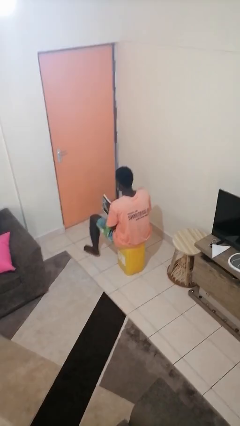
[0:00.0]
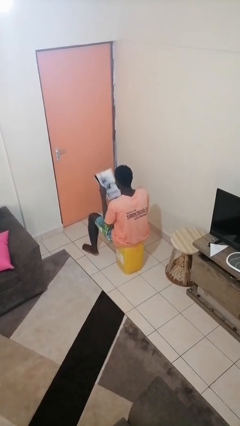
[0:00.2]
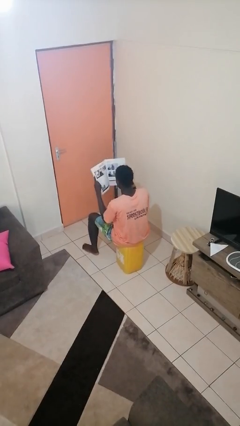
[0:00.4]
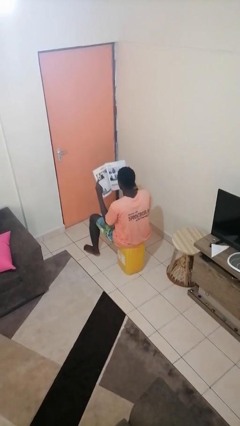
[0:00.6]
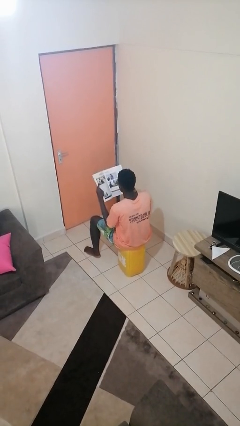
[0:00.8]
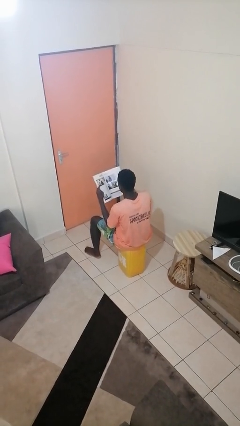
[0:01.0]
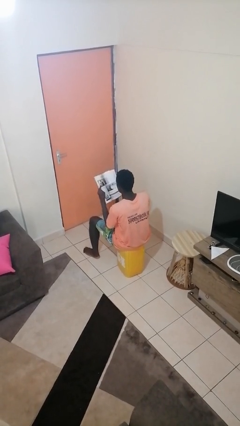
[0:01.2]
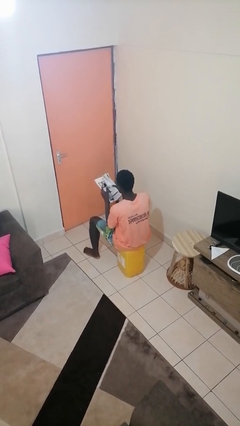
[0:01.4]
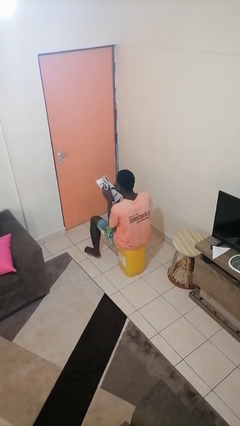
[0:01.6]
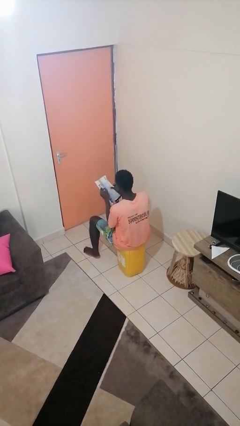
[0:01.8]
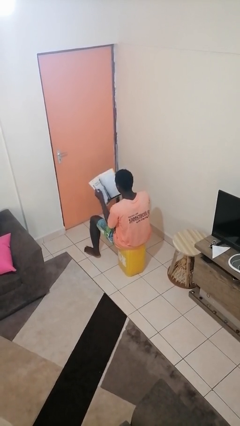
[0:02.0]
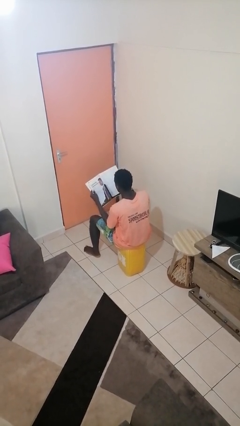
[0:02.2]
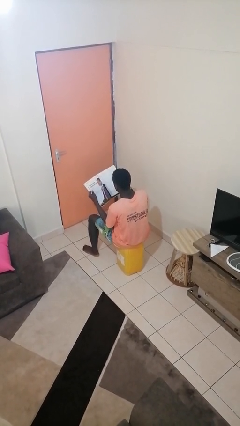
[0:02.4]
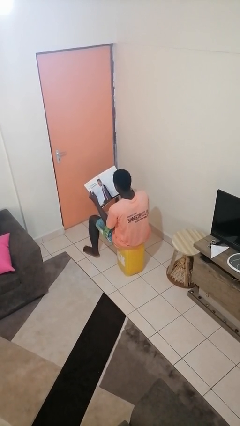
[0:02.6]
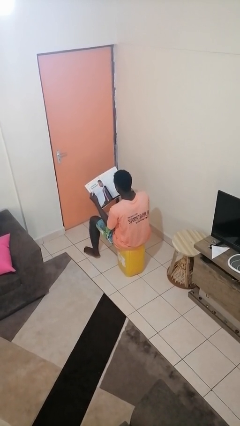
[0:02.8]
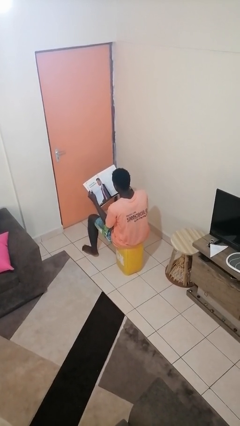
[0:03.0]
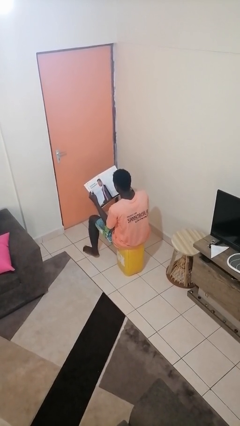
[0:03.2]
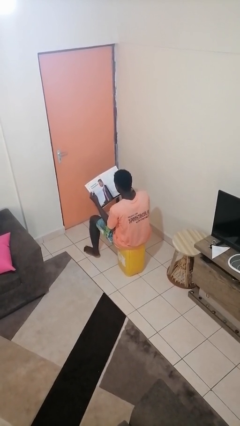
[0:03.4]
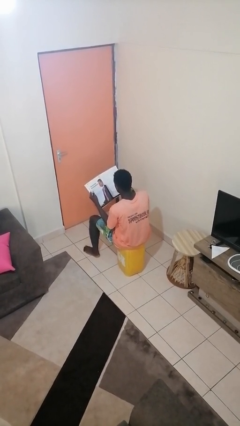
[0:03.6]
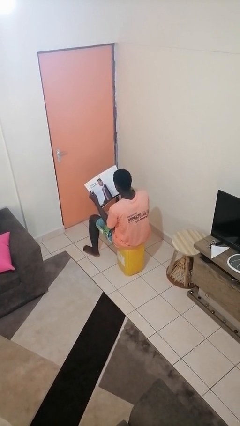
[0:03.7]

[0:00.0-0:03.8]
person reads magazine

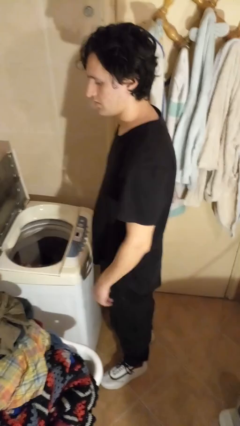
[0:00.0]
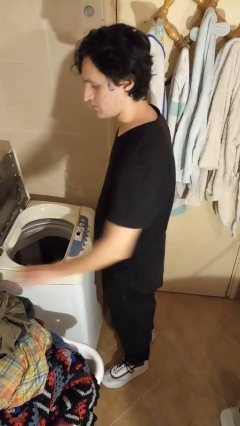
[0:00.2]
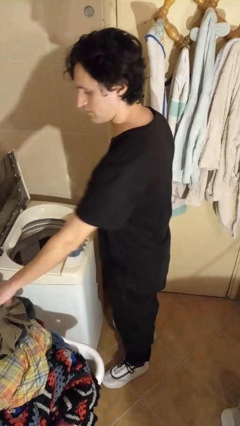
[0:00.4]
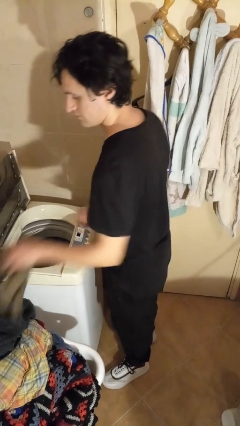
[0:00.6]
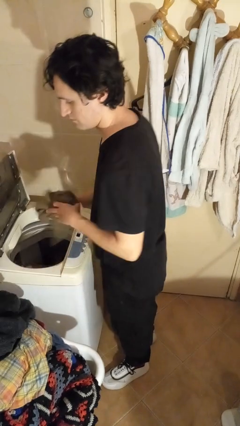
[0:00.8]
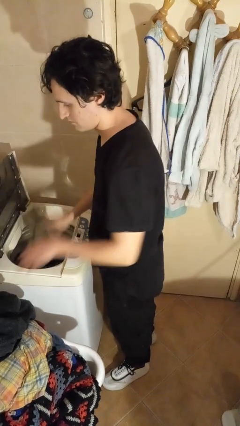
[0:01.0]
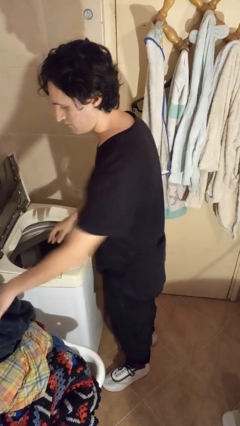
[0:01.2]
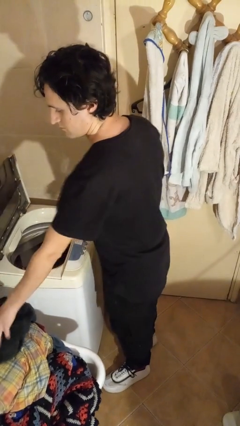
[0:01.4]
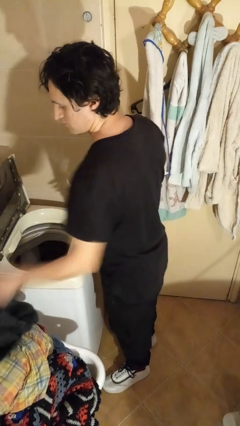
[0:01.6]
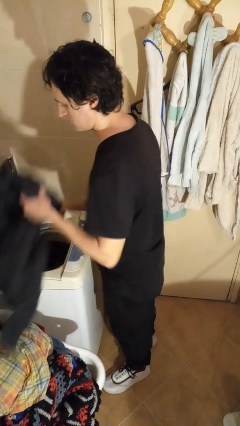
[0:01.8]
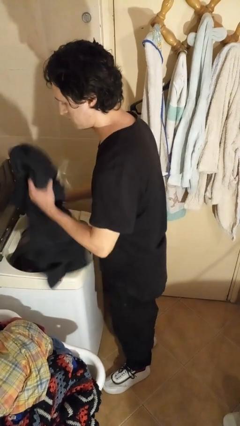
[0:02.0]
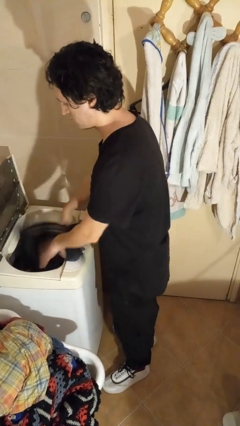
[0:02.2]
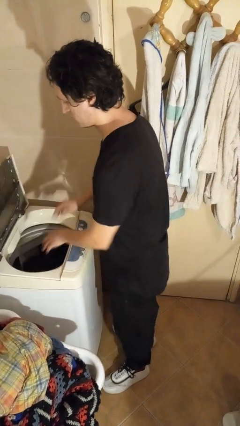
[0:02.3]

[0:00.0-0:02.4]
person unloads clotheswasher

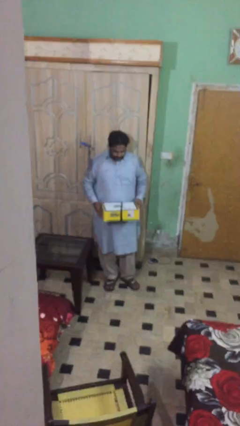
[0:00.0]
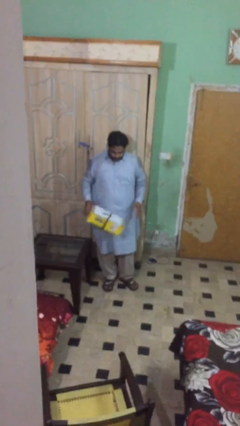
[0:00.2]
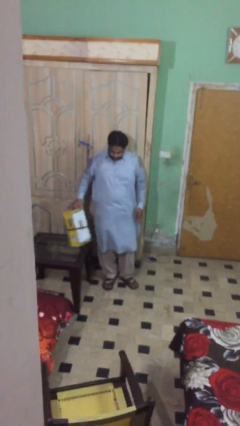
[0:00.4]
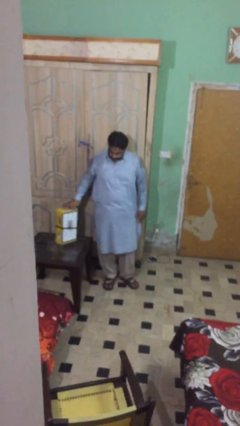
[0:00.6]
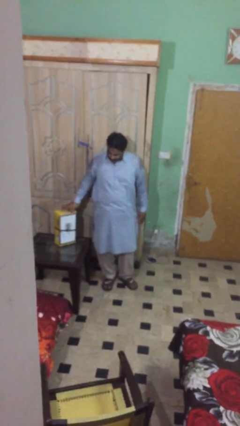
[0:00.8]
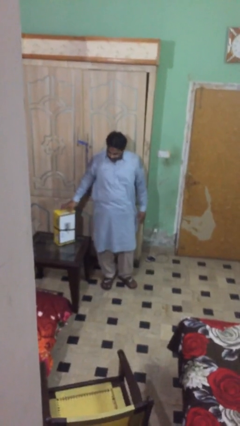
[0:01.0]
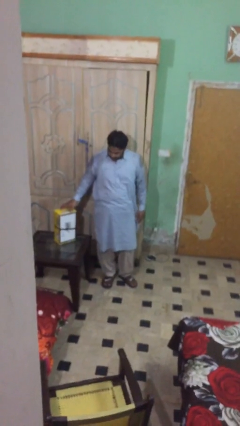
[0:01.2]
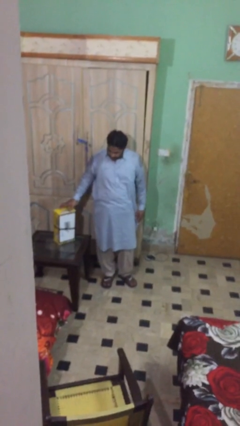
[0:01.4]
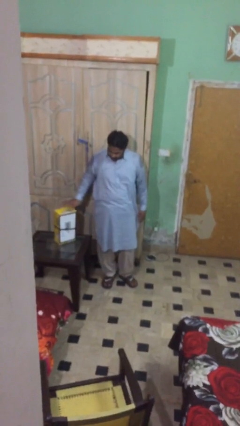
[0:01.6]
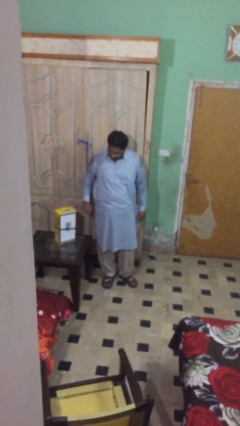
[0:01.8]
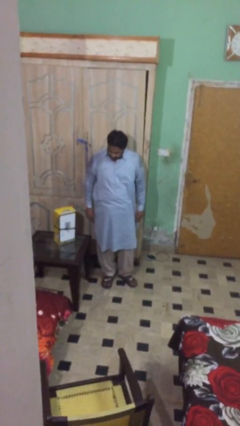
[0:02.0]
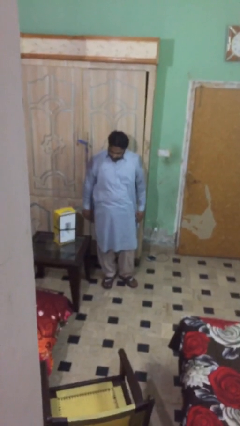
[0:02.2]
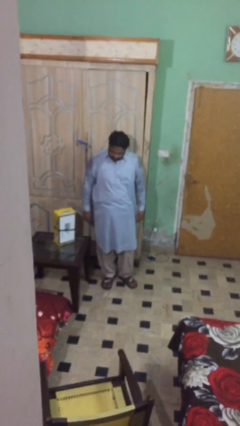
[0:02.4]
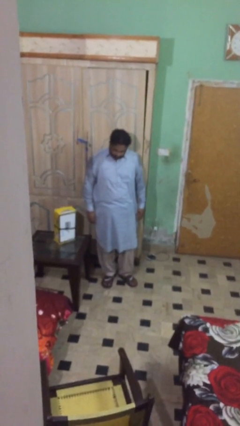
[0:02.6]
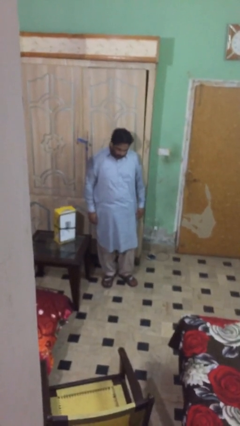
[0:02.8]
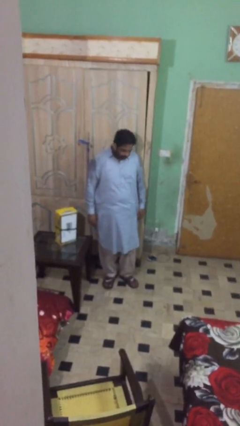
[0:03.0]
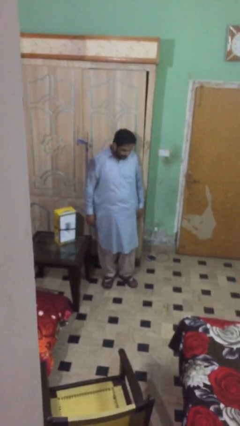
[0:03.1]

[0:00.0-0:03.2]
person puts down object on table

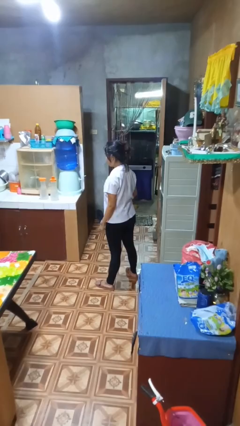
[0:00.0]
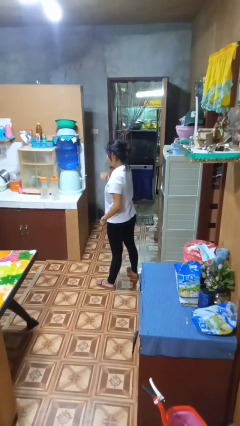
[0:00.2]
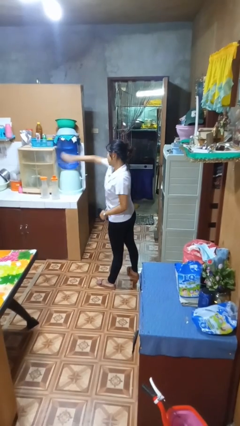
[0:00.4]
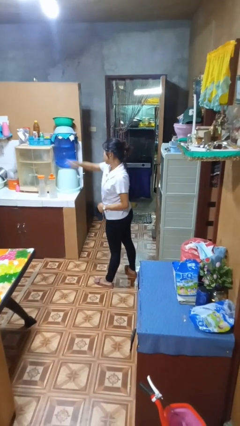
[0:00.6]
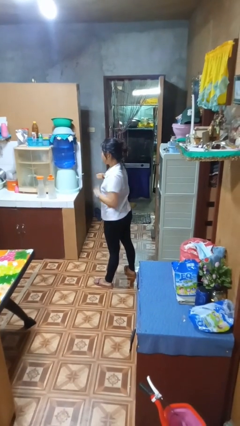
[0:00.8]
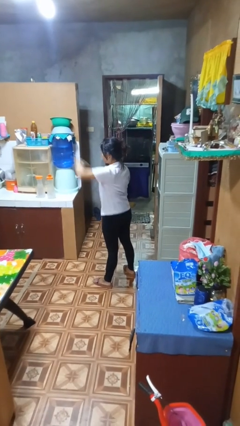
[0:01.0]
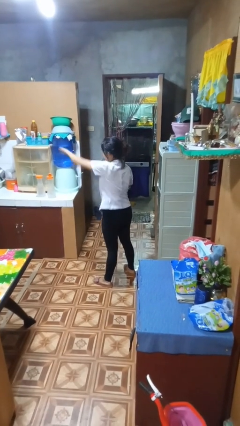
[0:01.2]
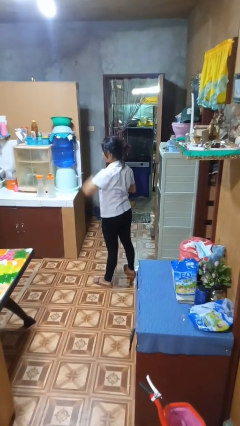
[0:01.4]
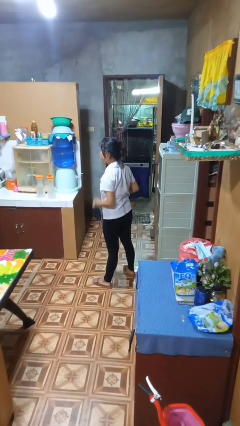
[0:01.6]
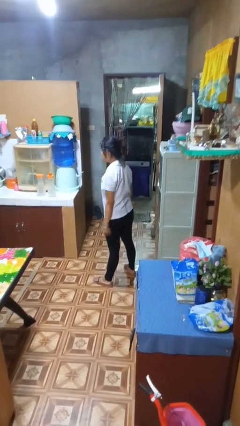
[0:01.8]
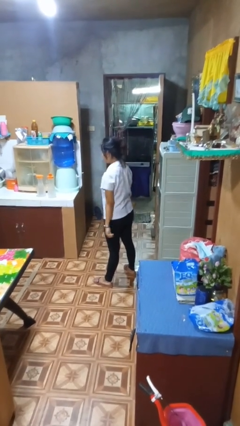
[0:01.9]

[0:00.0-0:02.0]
person punches

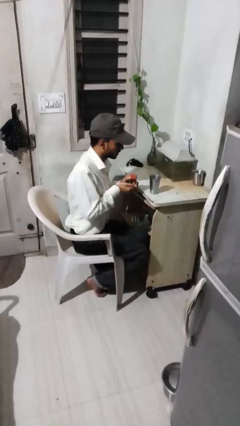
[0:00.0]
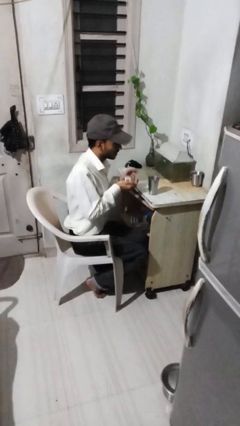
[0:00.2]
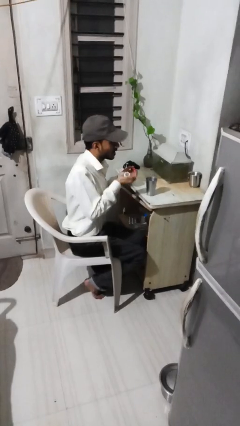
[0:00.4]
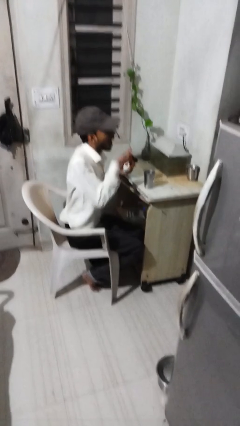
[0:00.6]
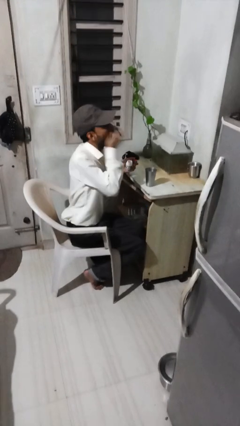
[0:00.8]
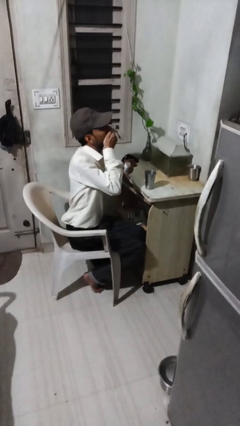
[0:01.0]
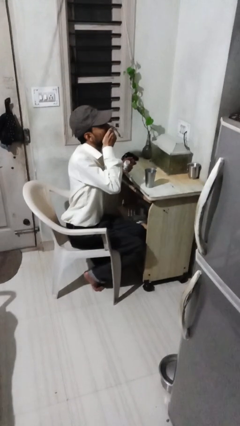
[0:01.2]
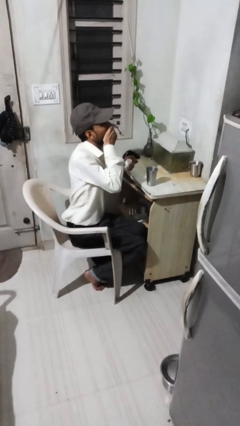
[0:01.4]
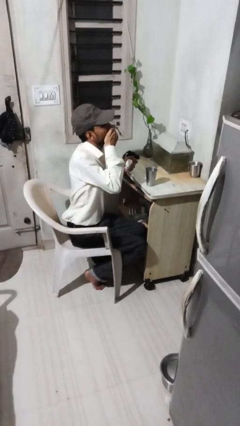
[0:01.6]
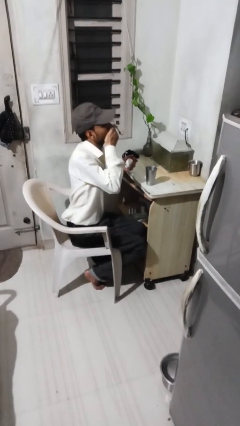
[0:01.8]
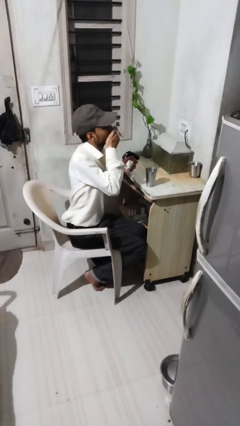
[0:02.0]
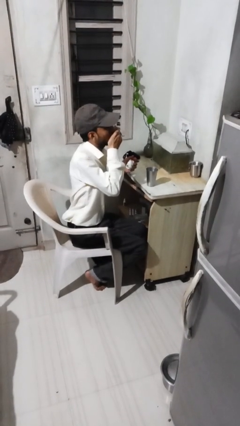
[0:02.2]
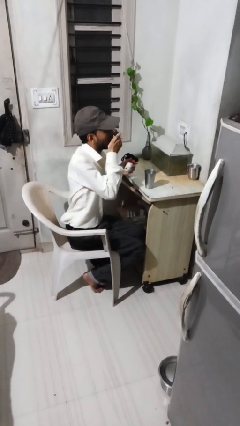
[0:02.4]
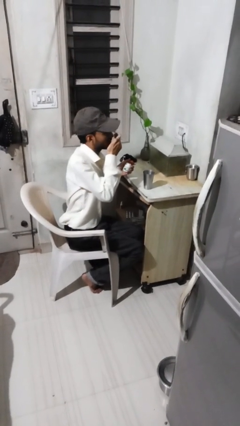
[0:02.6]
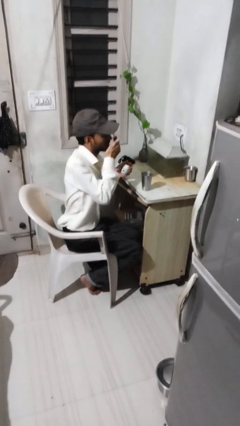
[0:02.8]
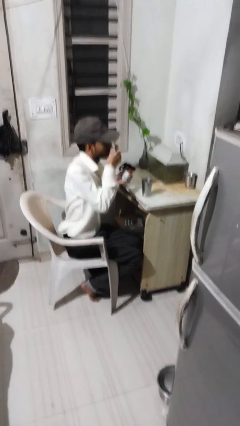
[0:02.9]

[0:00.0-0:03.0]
person takes medicine pills

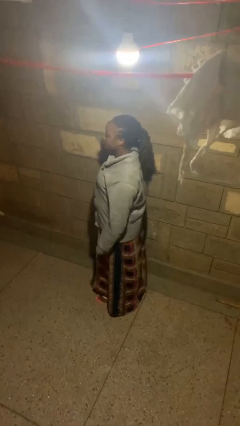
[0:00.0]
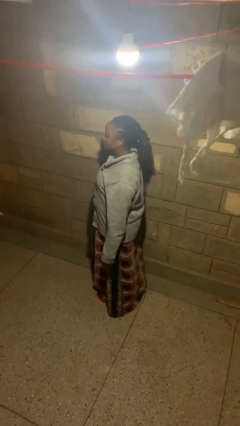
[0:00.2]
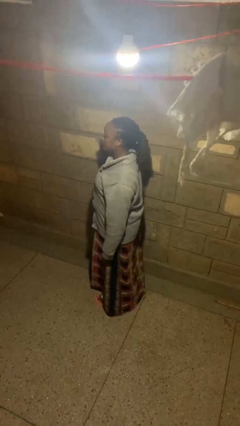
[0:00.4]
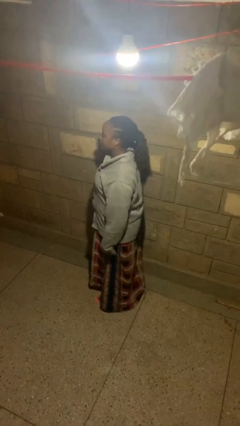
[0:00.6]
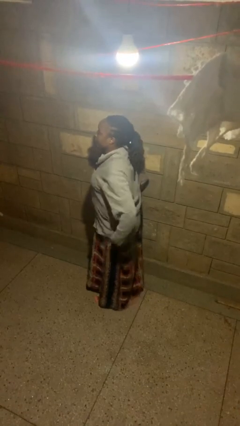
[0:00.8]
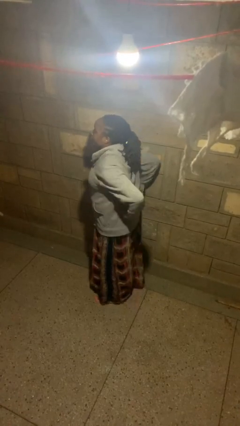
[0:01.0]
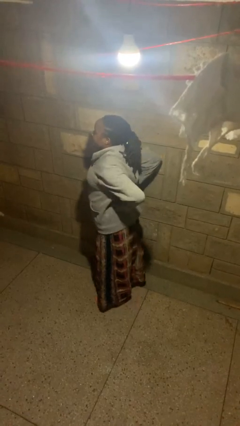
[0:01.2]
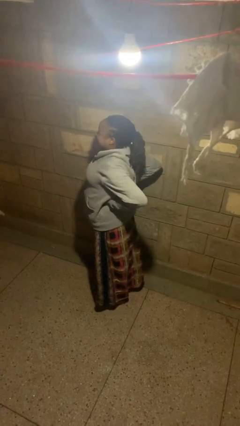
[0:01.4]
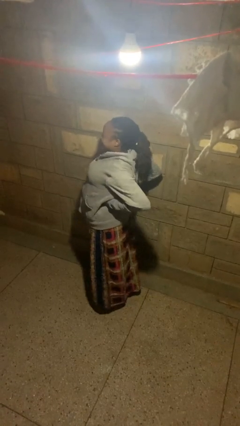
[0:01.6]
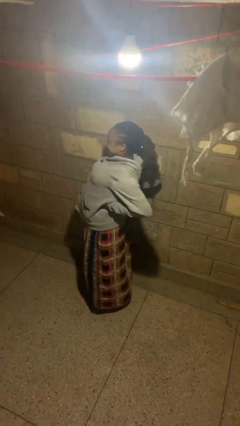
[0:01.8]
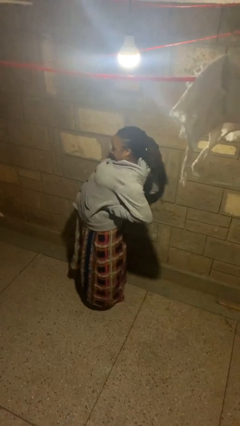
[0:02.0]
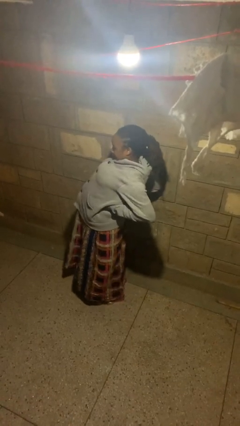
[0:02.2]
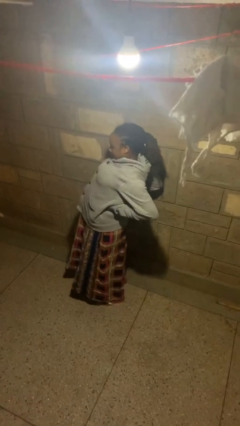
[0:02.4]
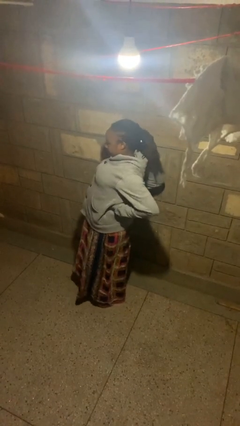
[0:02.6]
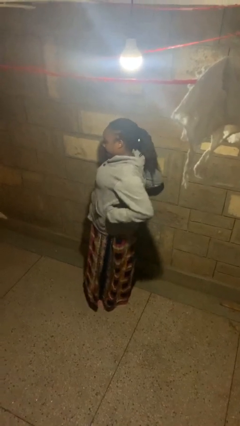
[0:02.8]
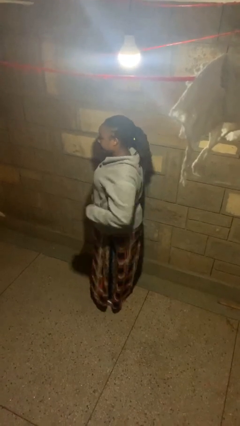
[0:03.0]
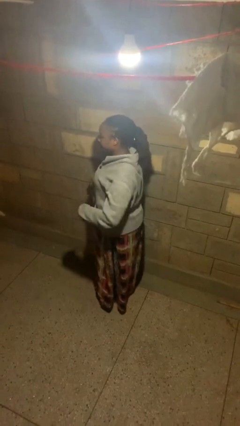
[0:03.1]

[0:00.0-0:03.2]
person stretches back
